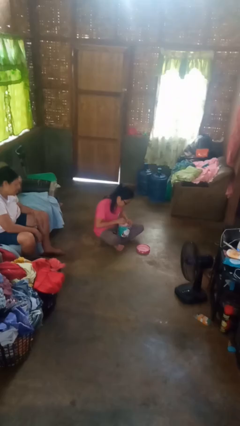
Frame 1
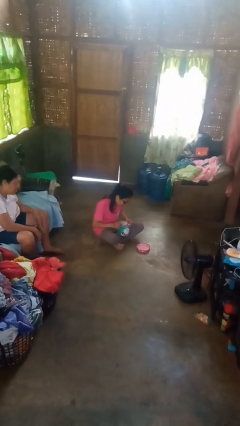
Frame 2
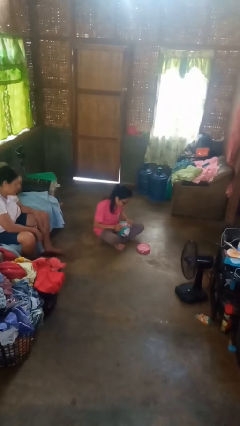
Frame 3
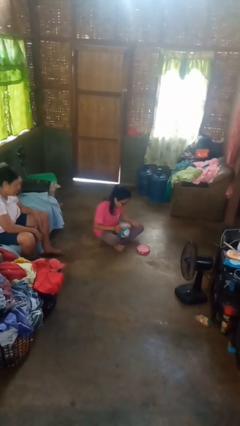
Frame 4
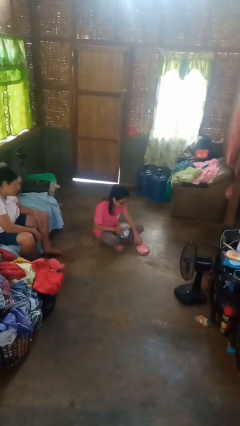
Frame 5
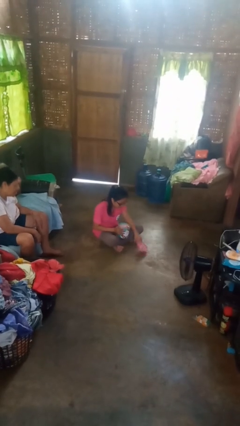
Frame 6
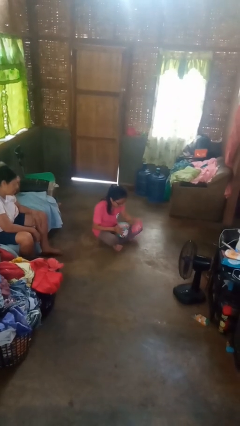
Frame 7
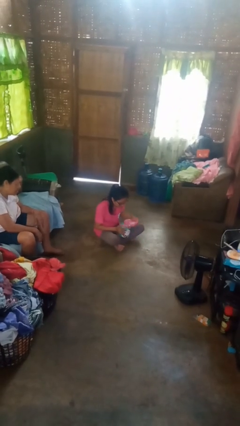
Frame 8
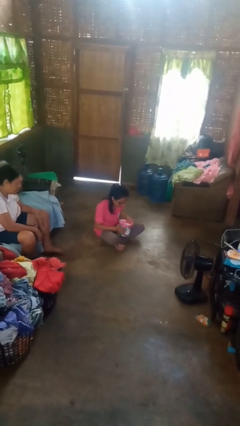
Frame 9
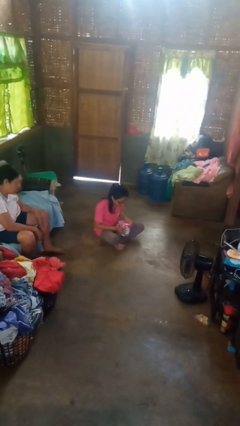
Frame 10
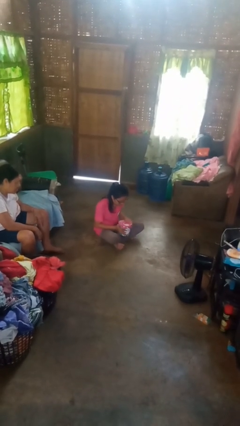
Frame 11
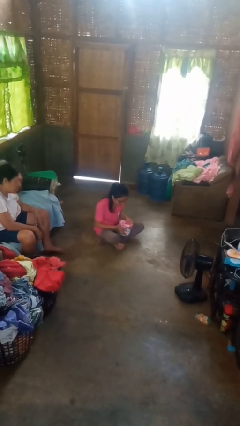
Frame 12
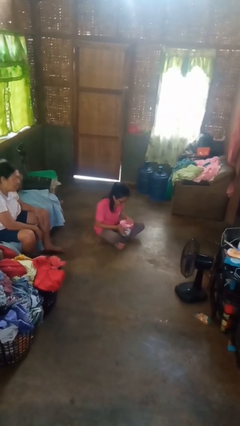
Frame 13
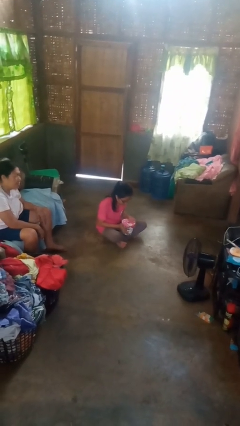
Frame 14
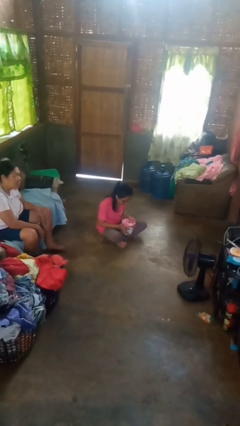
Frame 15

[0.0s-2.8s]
person closes jewelry box

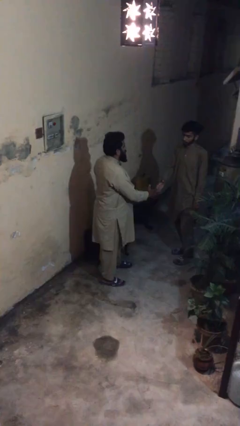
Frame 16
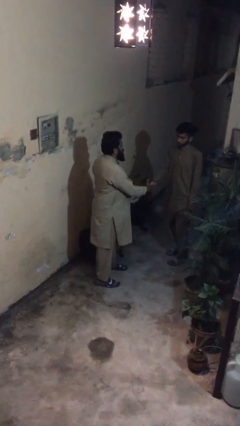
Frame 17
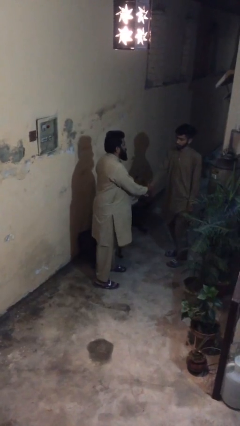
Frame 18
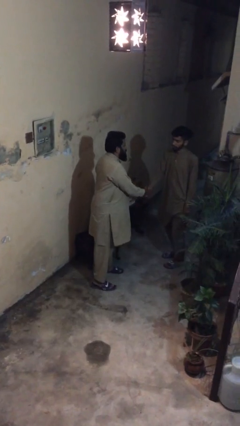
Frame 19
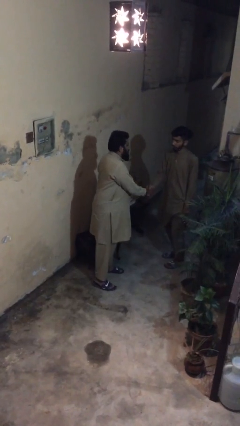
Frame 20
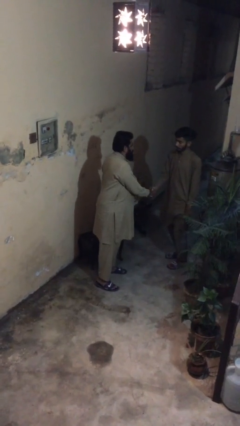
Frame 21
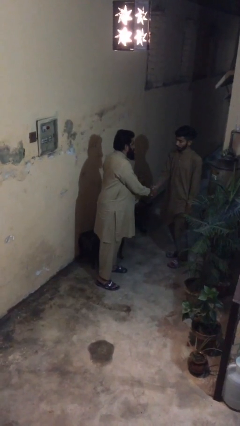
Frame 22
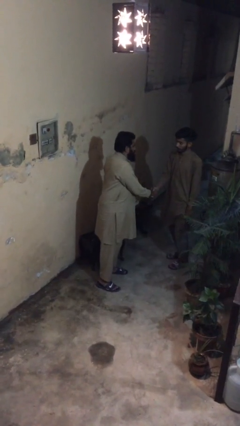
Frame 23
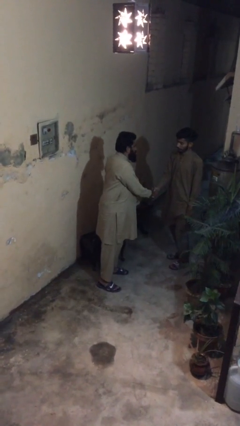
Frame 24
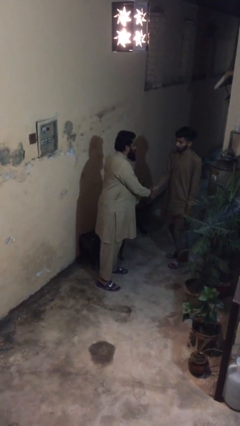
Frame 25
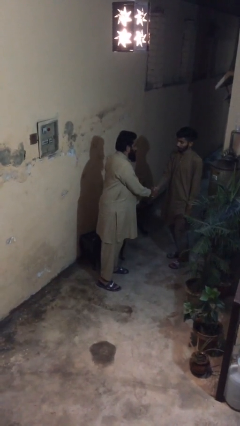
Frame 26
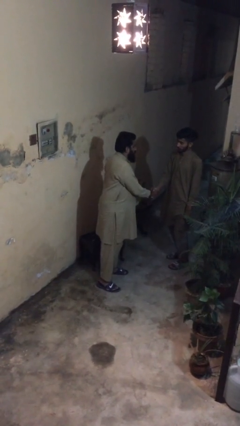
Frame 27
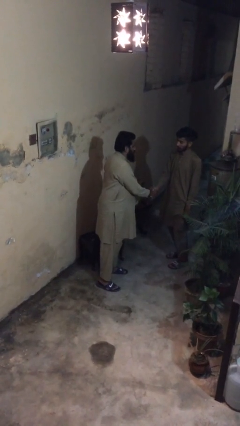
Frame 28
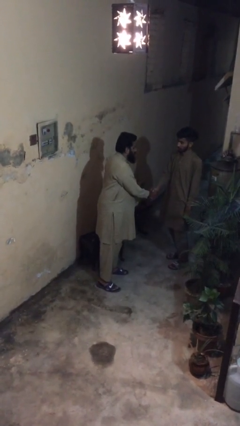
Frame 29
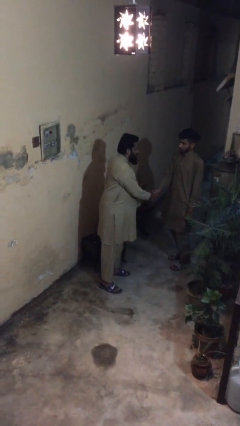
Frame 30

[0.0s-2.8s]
person shakes hand

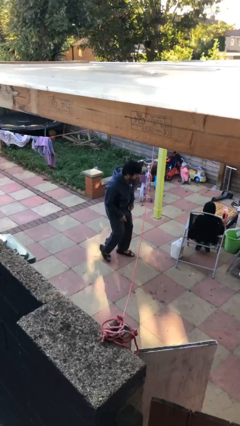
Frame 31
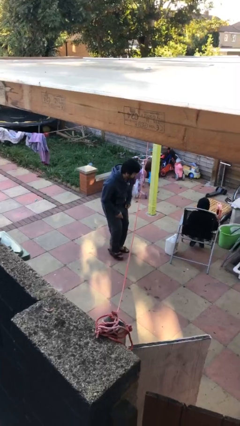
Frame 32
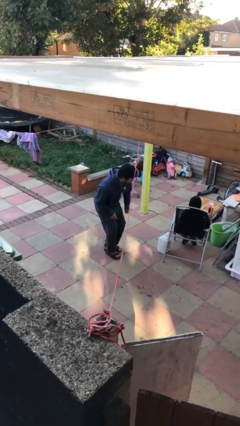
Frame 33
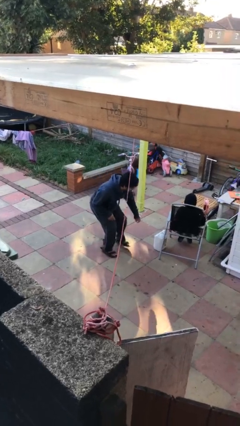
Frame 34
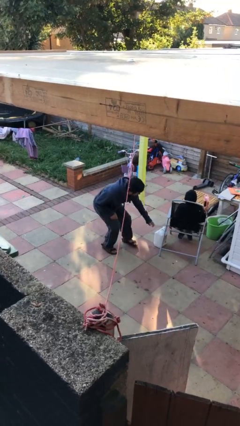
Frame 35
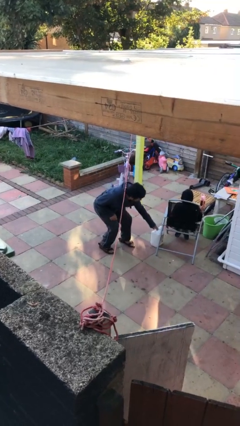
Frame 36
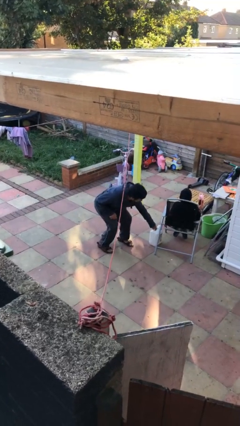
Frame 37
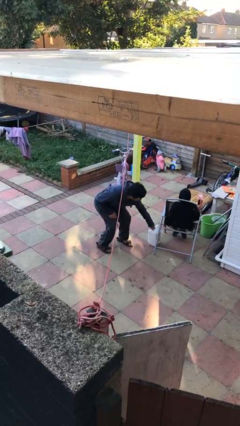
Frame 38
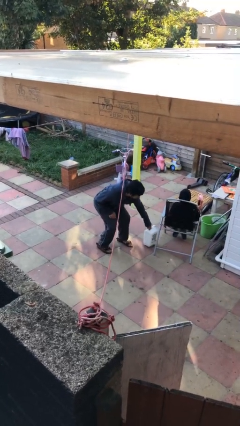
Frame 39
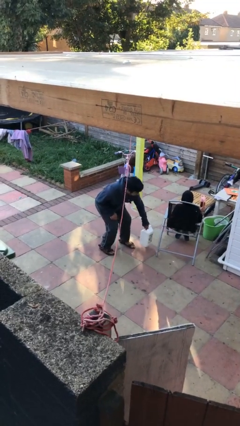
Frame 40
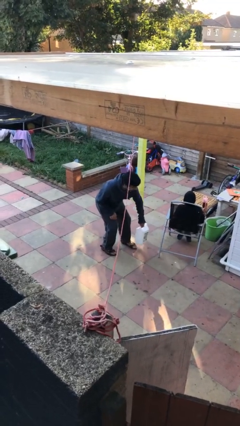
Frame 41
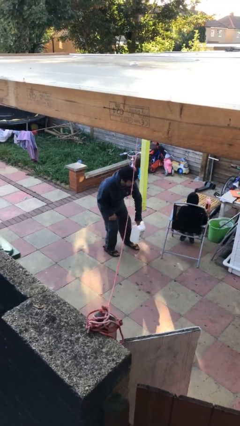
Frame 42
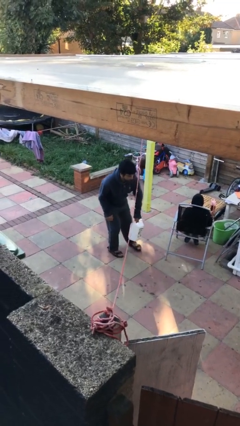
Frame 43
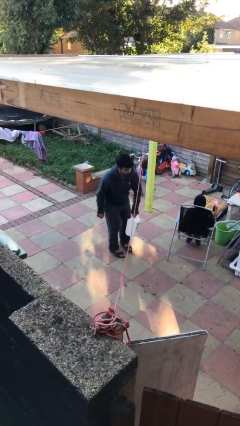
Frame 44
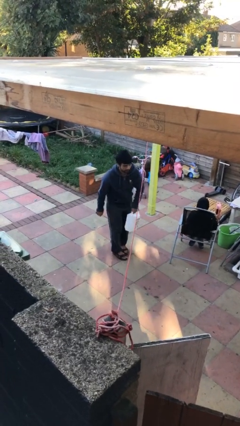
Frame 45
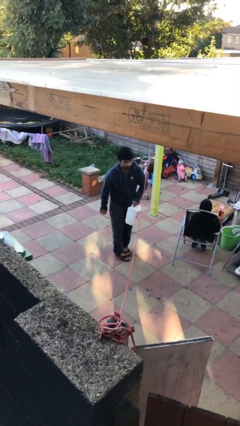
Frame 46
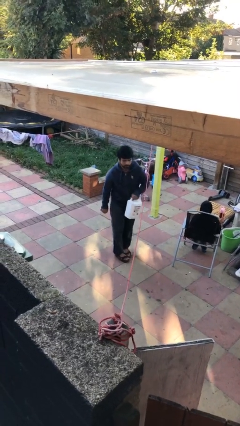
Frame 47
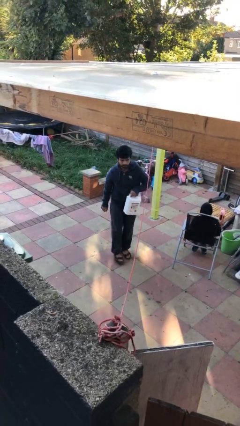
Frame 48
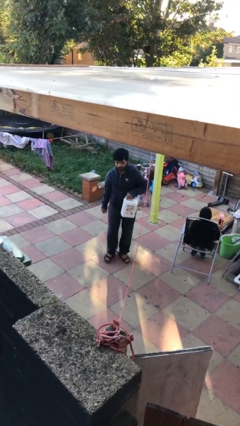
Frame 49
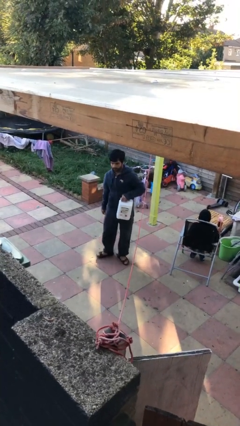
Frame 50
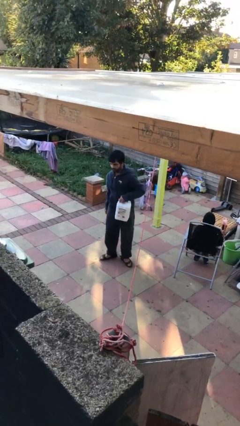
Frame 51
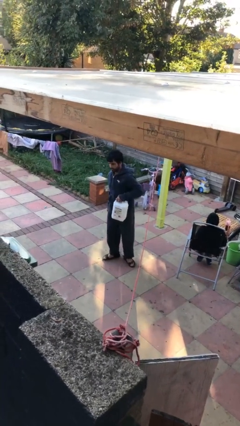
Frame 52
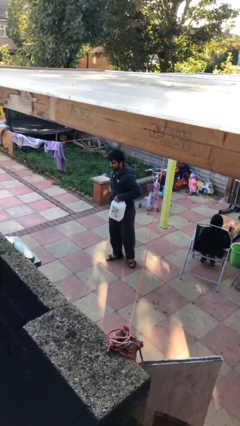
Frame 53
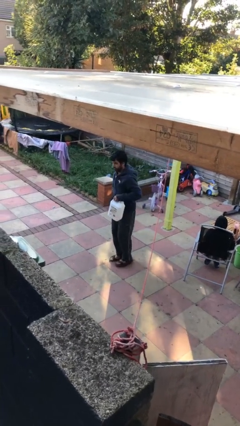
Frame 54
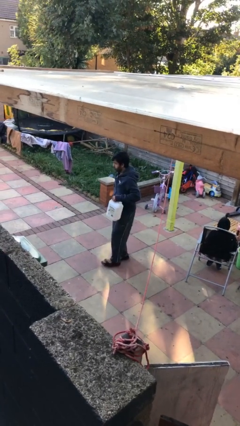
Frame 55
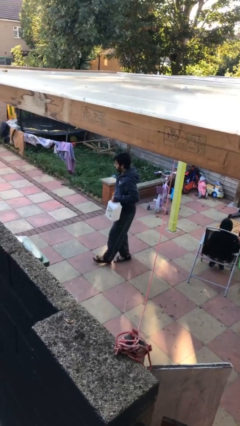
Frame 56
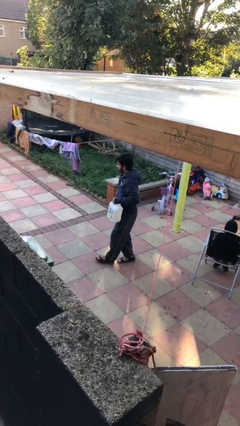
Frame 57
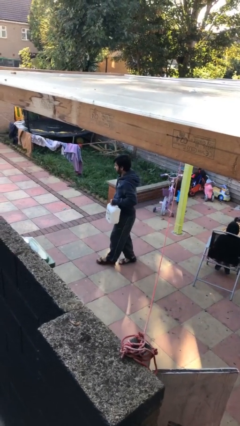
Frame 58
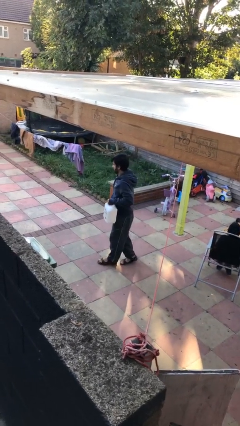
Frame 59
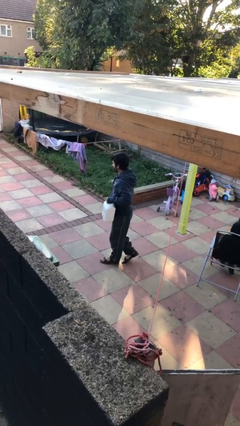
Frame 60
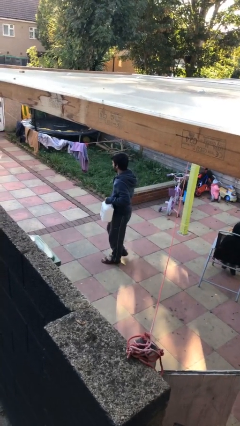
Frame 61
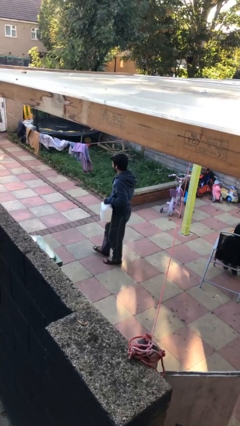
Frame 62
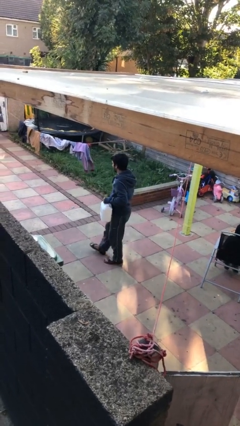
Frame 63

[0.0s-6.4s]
person steals object from person

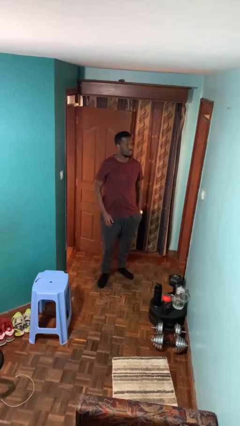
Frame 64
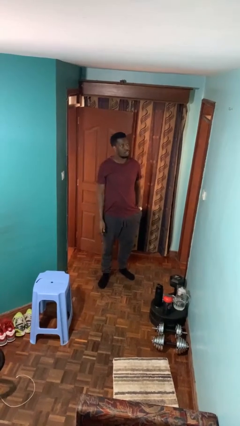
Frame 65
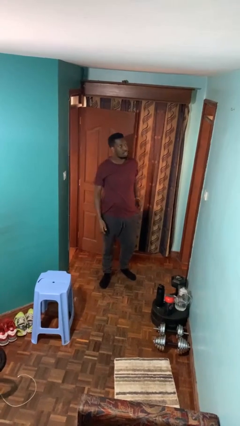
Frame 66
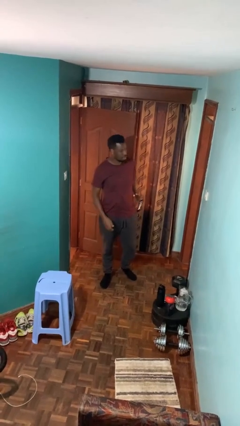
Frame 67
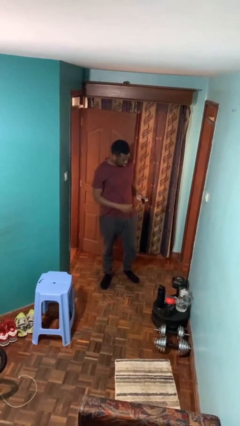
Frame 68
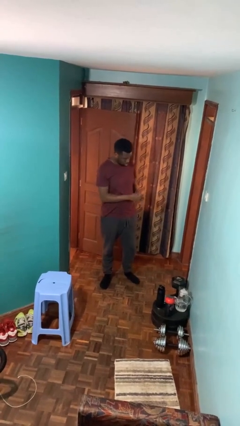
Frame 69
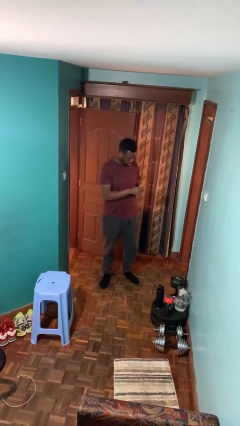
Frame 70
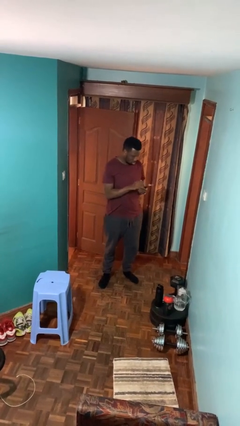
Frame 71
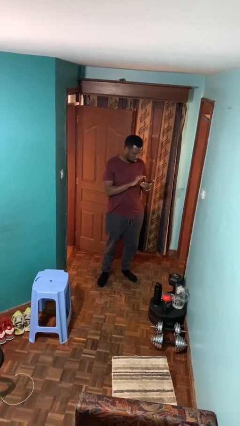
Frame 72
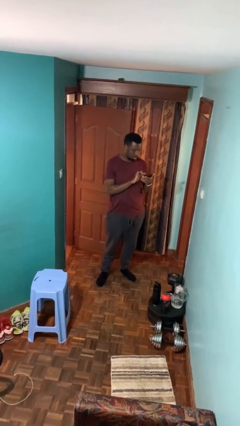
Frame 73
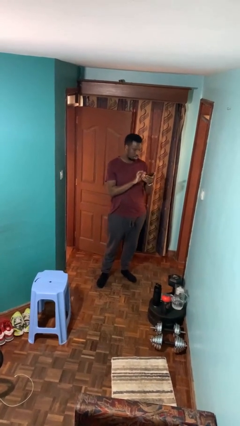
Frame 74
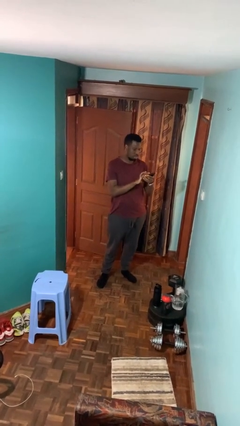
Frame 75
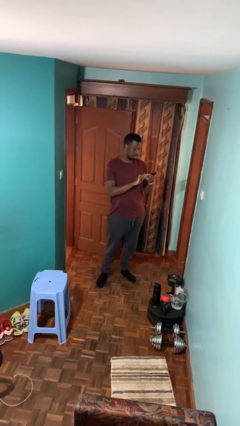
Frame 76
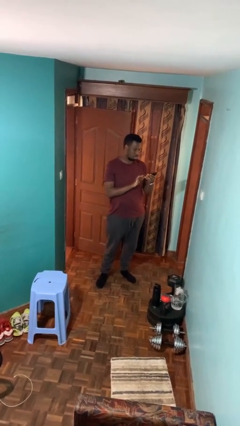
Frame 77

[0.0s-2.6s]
person takes phone from pocket

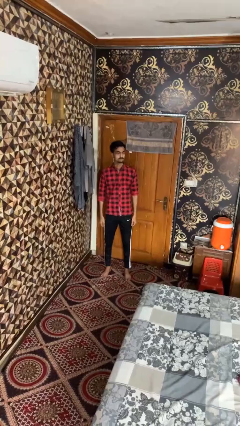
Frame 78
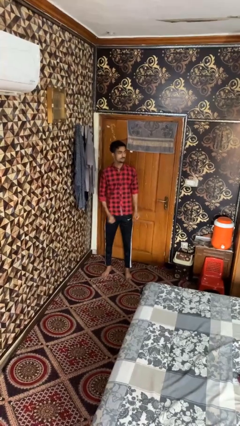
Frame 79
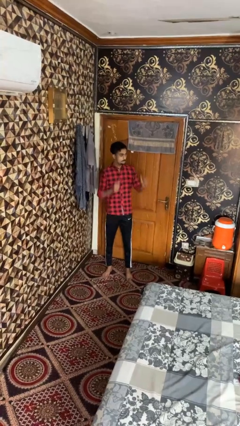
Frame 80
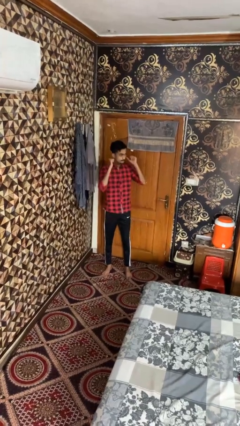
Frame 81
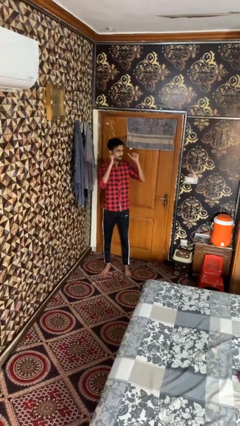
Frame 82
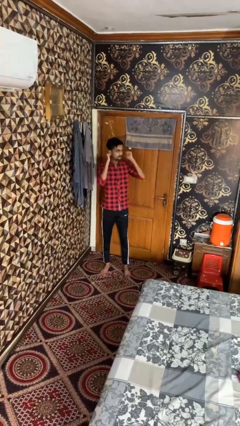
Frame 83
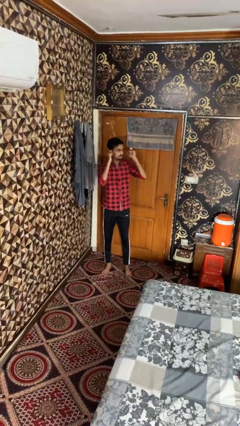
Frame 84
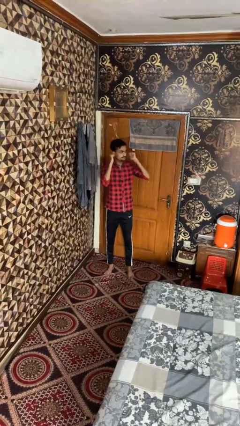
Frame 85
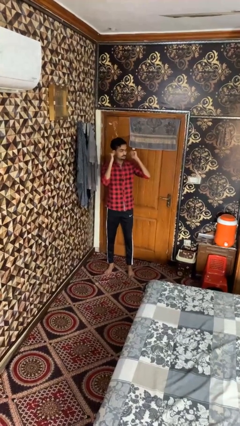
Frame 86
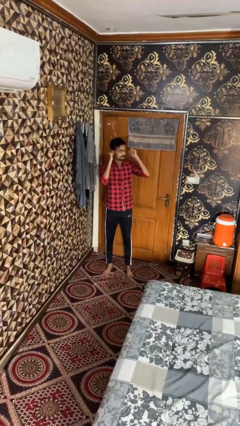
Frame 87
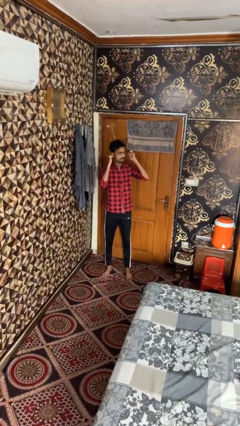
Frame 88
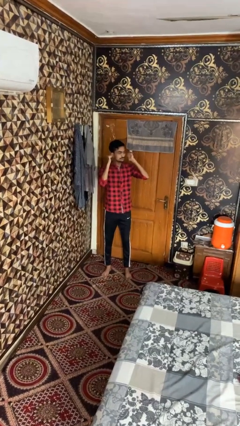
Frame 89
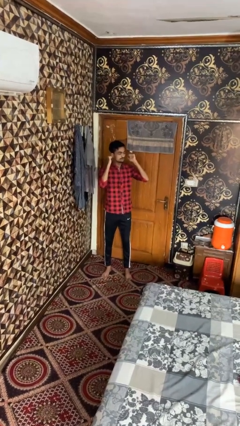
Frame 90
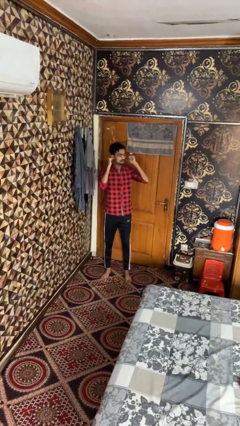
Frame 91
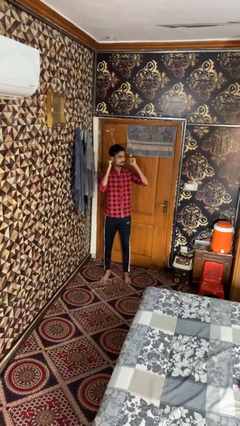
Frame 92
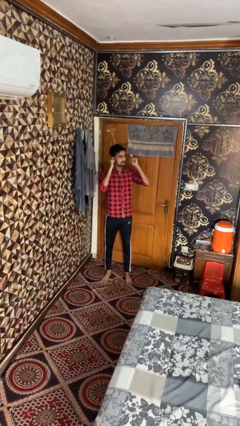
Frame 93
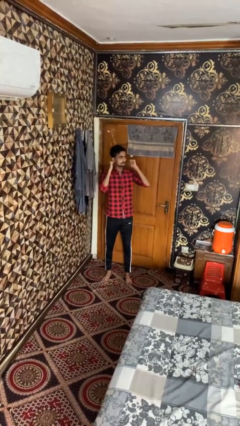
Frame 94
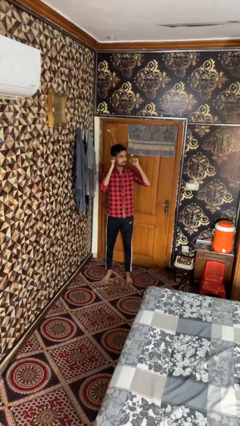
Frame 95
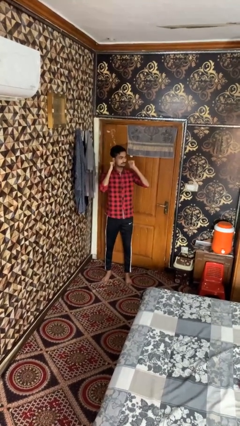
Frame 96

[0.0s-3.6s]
person gestures behind me
